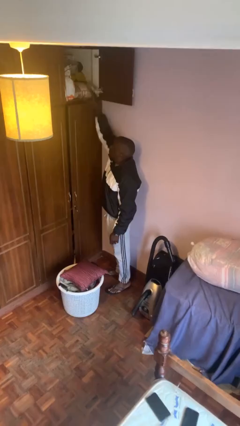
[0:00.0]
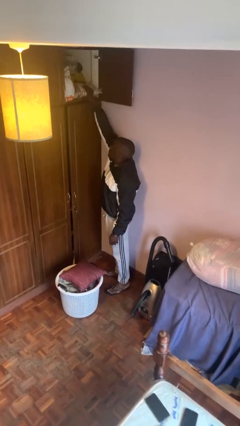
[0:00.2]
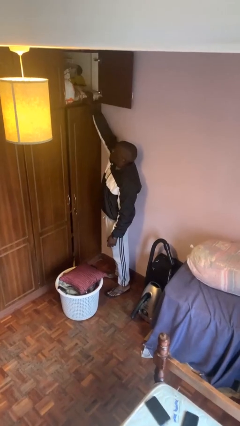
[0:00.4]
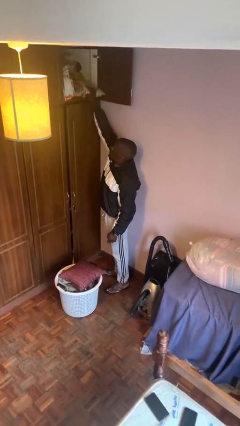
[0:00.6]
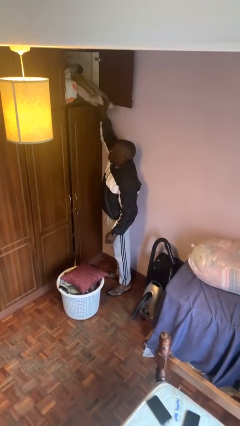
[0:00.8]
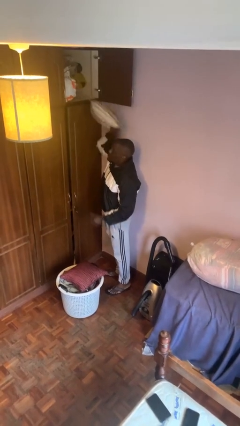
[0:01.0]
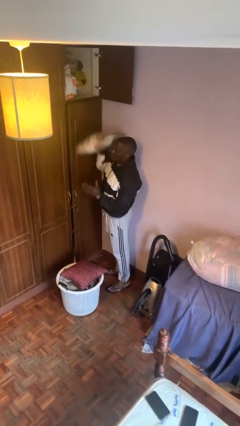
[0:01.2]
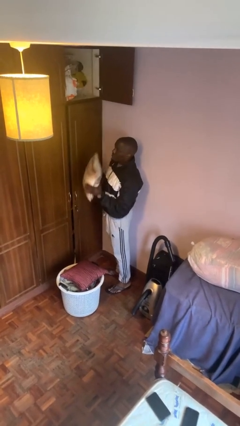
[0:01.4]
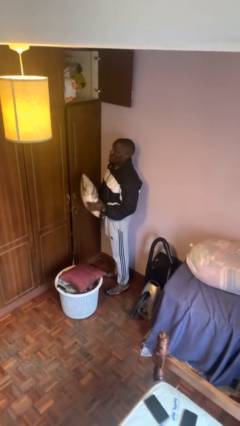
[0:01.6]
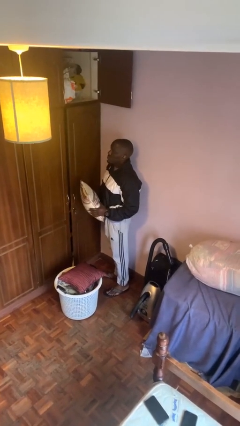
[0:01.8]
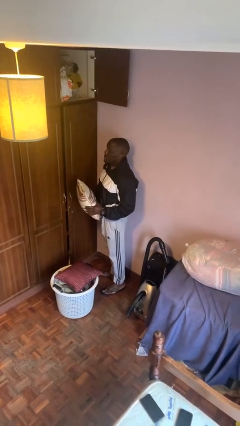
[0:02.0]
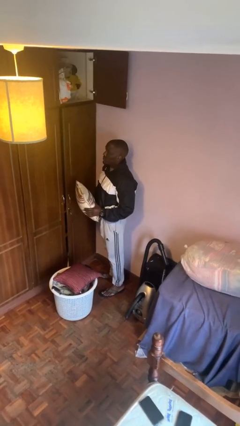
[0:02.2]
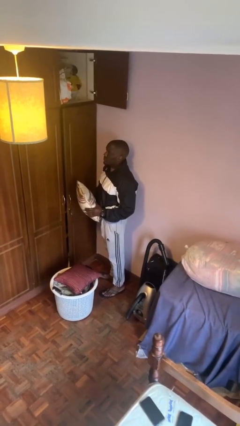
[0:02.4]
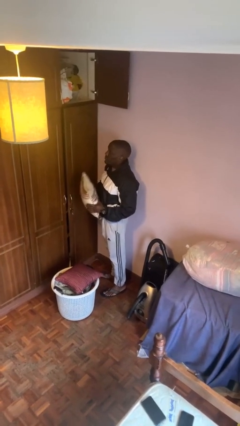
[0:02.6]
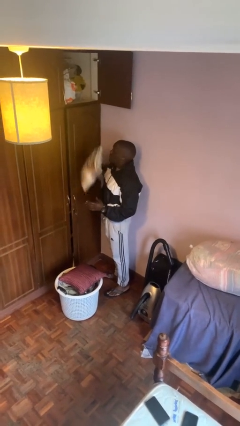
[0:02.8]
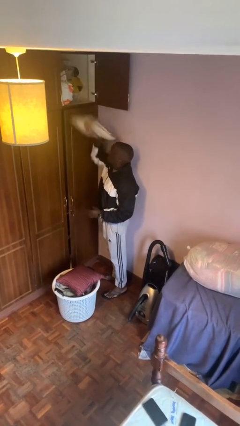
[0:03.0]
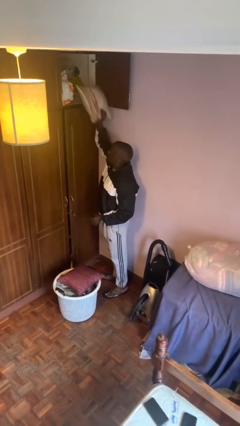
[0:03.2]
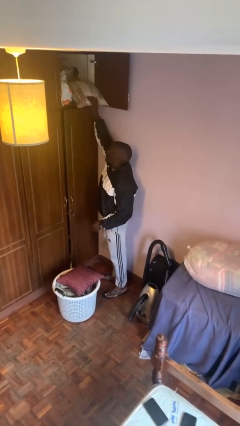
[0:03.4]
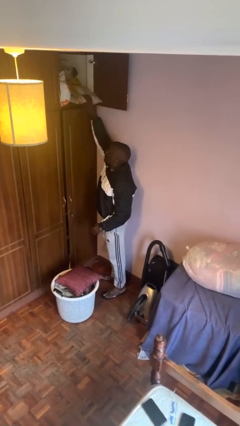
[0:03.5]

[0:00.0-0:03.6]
person picks up object from shelf

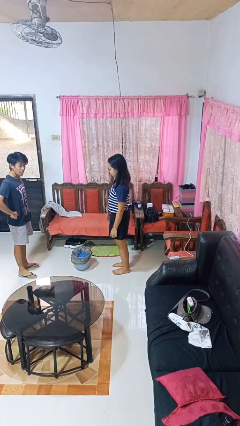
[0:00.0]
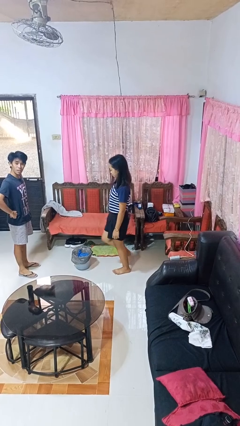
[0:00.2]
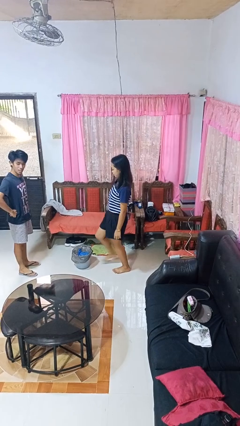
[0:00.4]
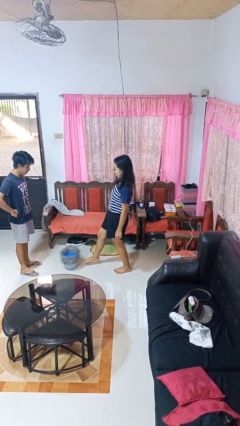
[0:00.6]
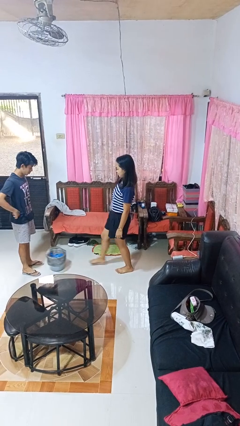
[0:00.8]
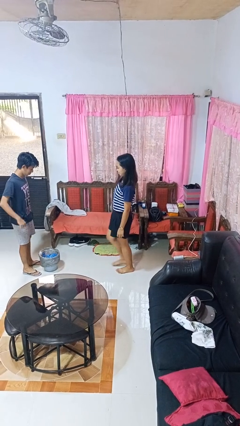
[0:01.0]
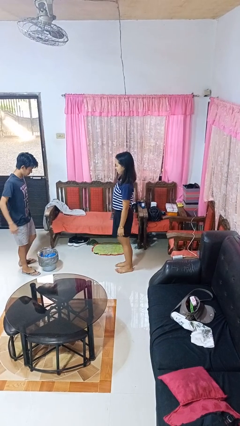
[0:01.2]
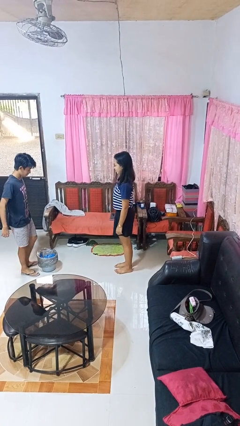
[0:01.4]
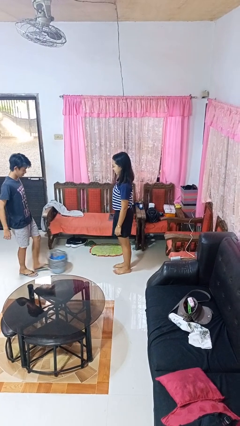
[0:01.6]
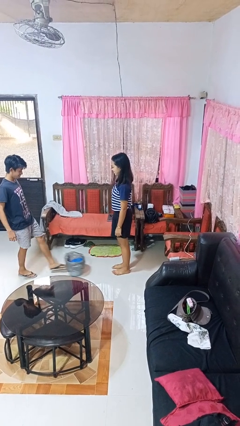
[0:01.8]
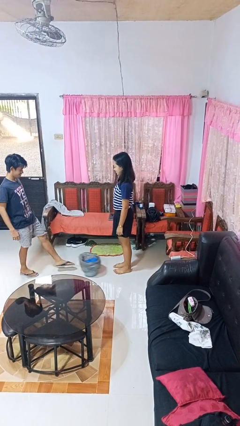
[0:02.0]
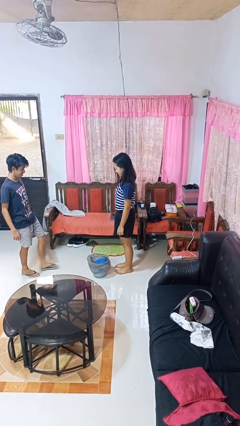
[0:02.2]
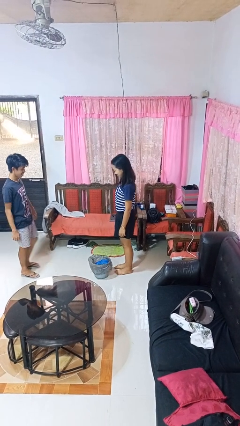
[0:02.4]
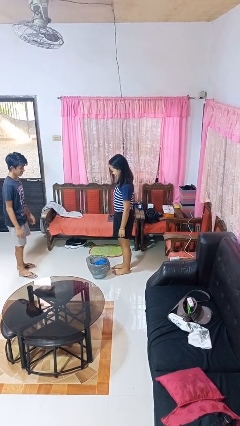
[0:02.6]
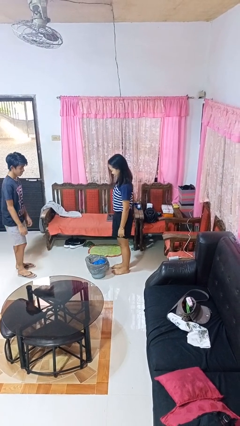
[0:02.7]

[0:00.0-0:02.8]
person kicks object to person

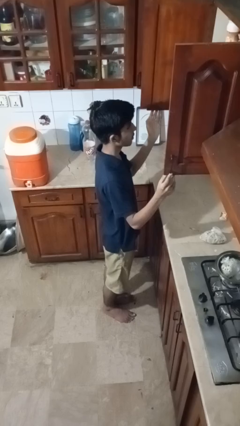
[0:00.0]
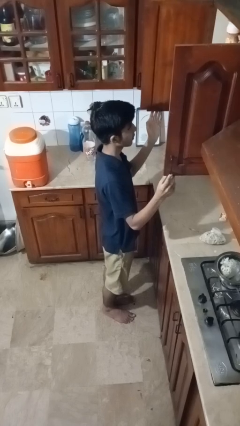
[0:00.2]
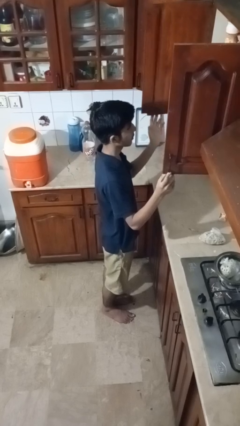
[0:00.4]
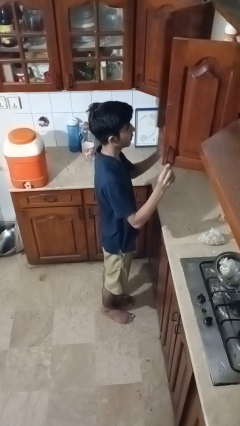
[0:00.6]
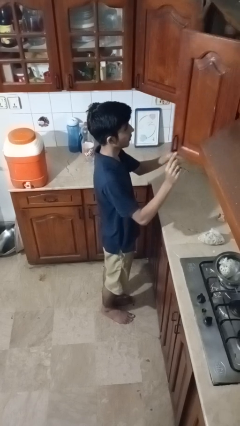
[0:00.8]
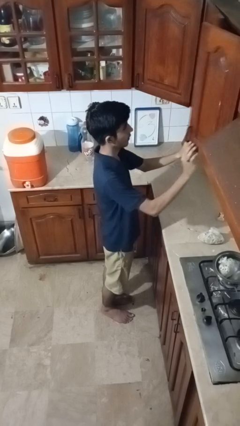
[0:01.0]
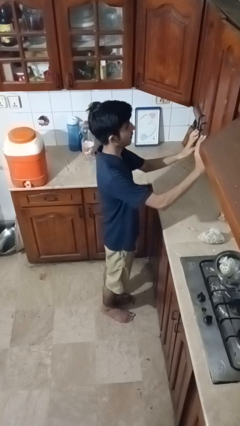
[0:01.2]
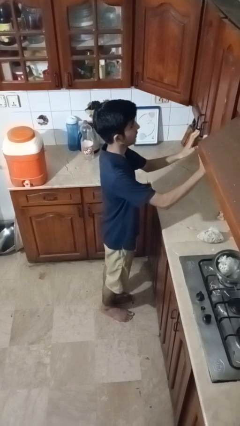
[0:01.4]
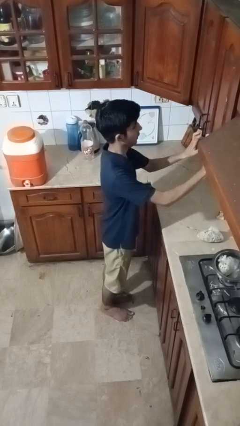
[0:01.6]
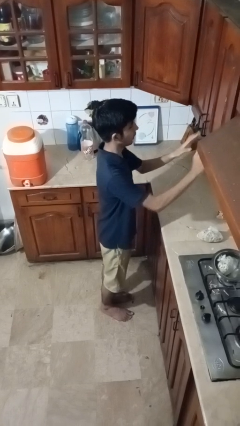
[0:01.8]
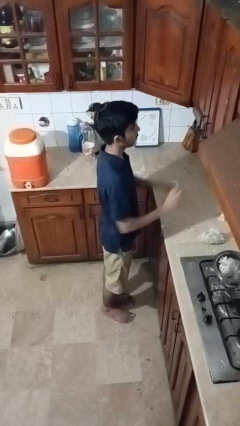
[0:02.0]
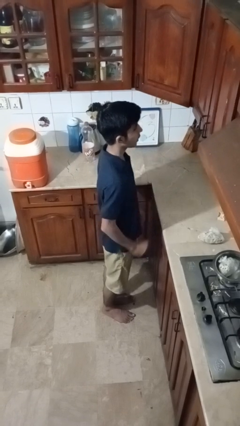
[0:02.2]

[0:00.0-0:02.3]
person closes cabinet

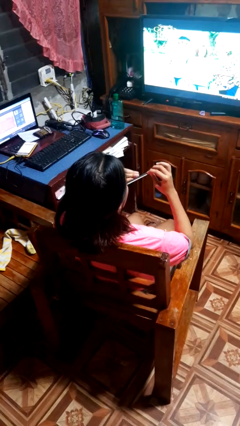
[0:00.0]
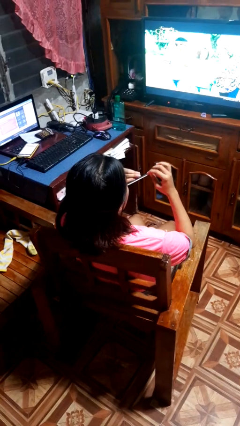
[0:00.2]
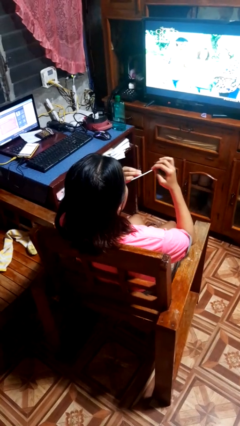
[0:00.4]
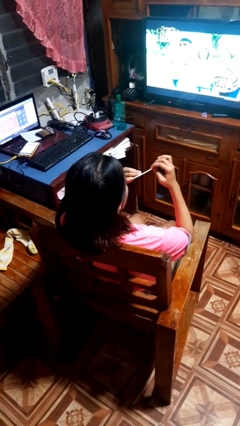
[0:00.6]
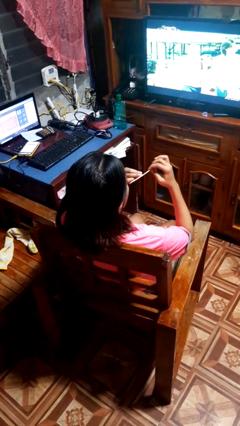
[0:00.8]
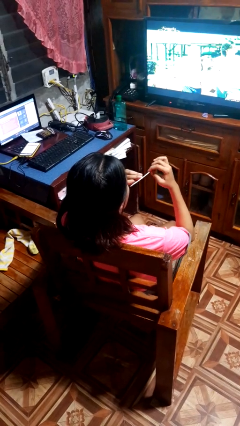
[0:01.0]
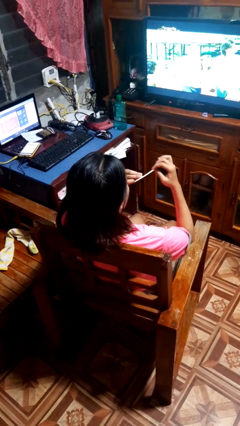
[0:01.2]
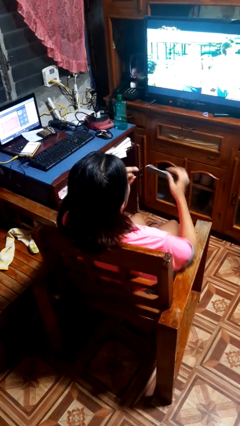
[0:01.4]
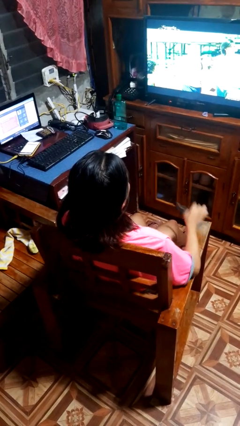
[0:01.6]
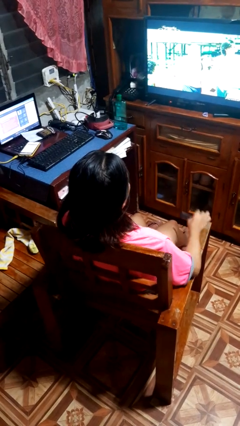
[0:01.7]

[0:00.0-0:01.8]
person files fingernails

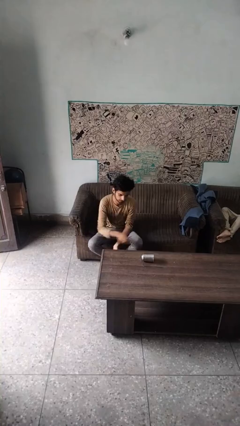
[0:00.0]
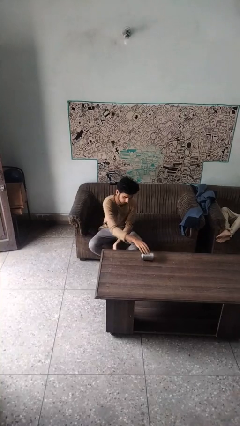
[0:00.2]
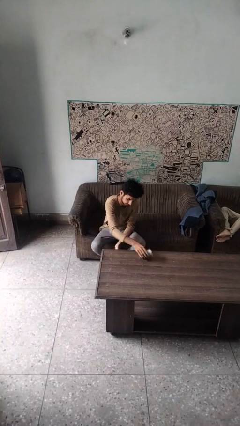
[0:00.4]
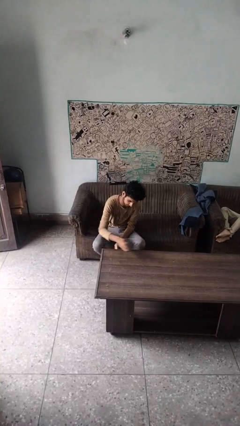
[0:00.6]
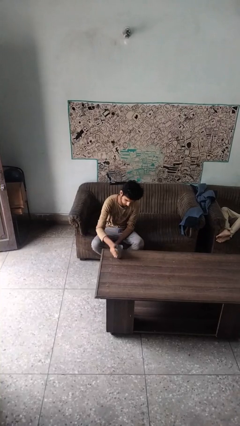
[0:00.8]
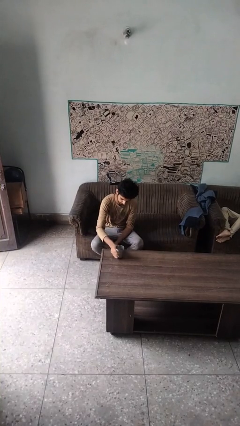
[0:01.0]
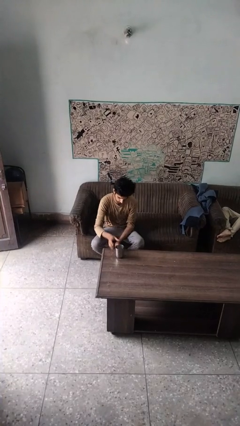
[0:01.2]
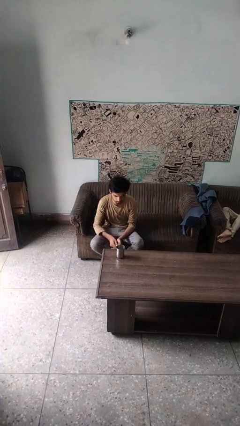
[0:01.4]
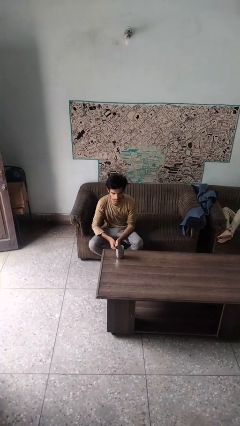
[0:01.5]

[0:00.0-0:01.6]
person sets upright glass

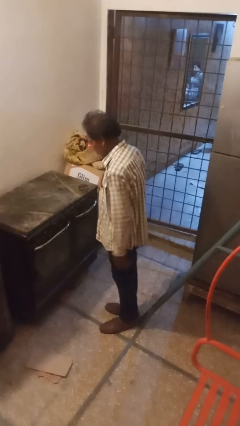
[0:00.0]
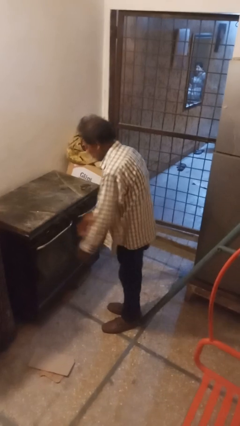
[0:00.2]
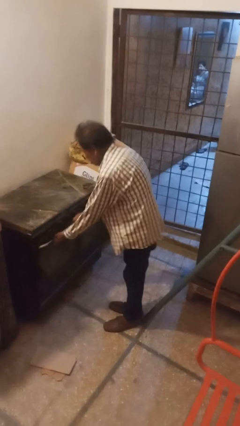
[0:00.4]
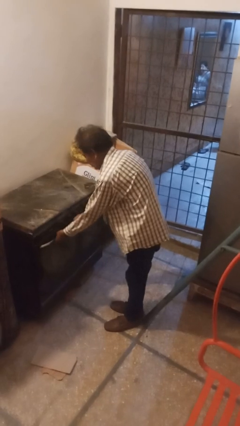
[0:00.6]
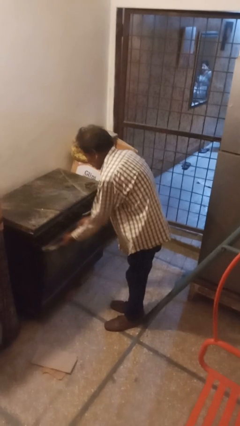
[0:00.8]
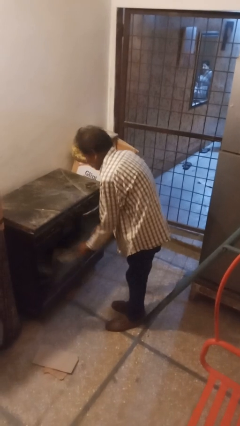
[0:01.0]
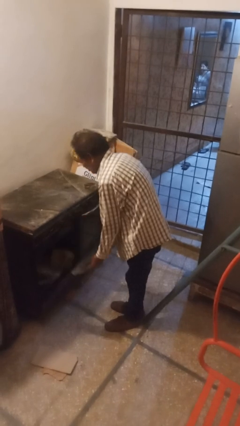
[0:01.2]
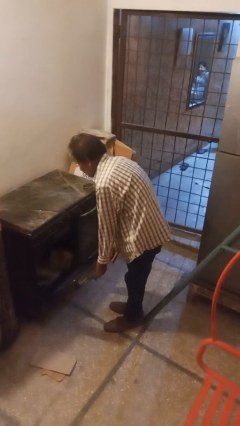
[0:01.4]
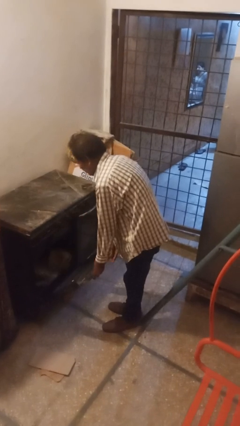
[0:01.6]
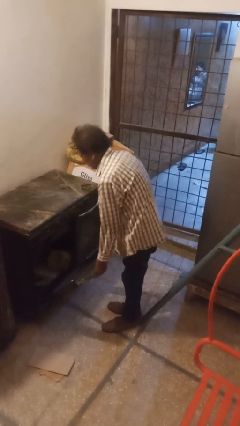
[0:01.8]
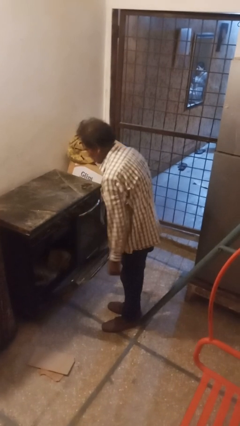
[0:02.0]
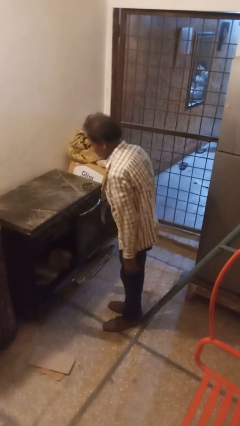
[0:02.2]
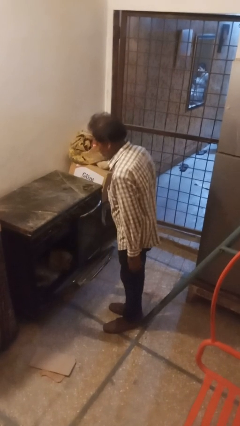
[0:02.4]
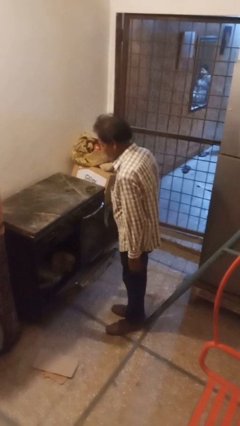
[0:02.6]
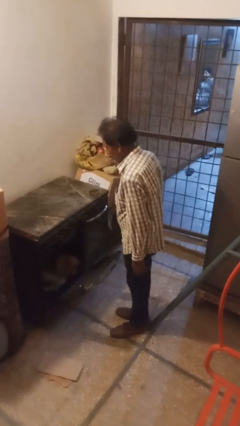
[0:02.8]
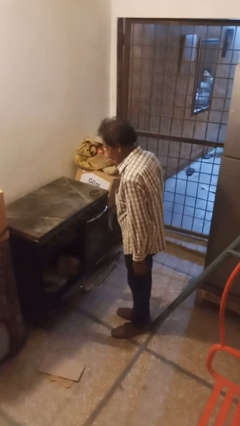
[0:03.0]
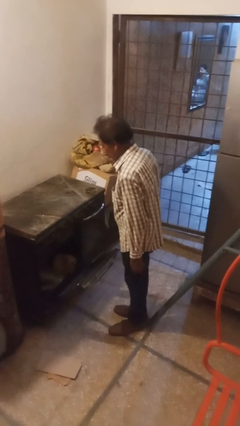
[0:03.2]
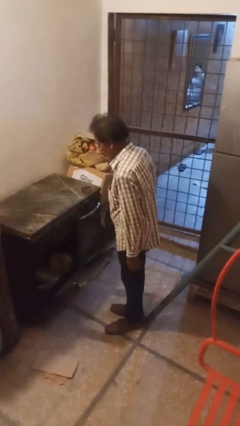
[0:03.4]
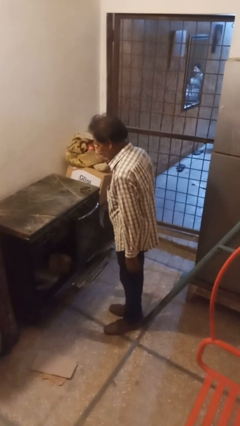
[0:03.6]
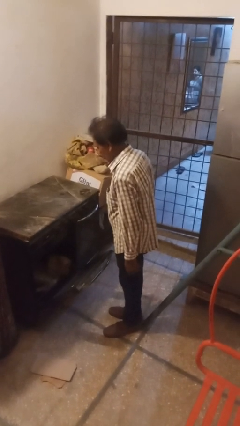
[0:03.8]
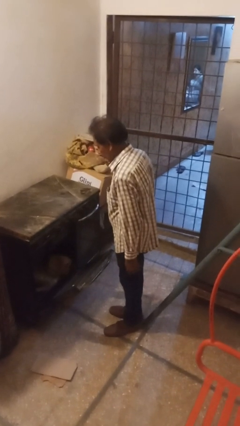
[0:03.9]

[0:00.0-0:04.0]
person opens oven door

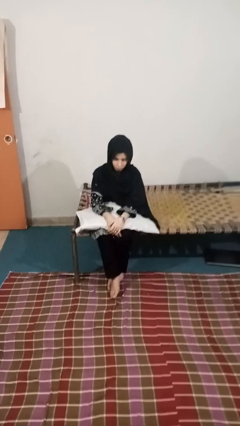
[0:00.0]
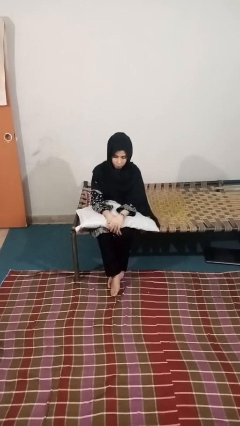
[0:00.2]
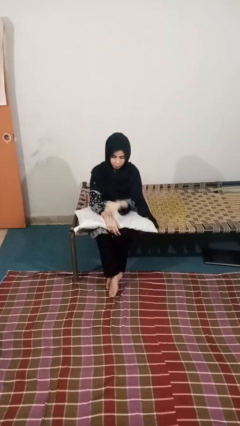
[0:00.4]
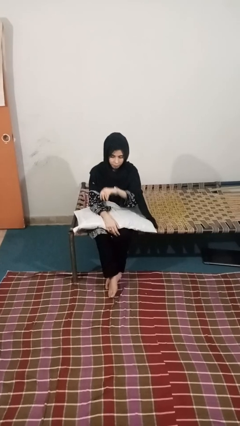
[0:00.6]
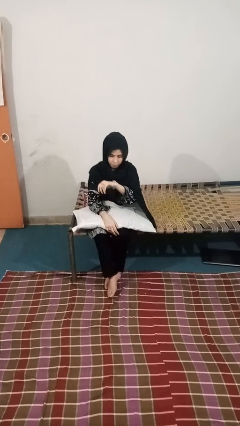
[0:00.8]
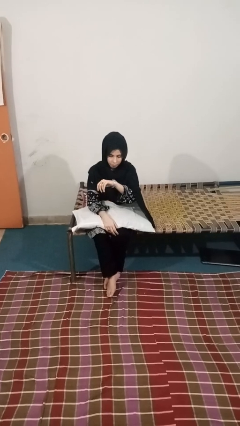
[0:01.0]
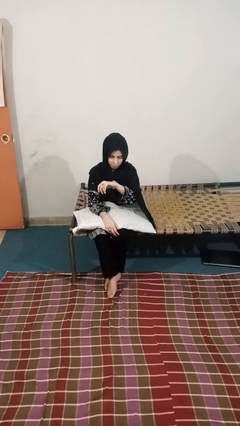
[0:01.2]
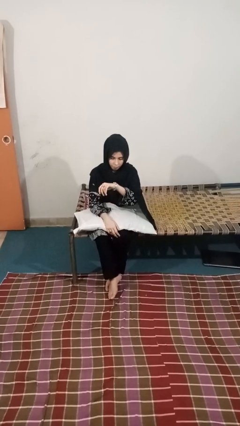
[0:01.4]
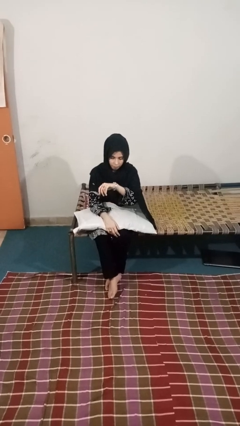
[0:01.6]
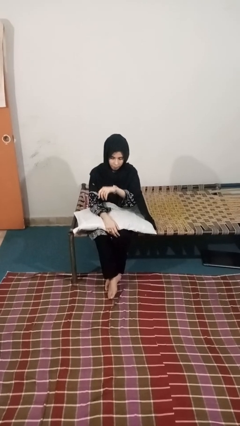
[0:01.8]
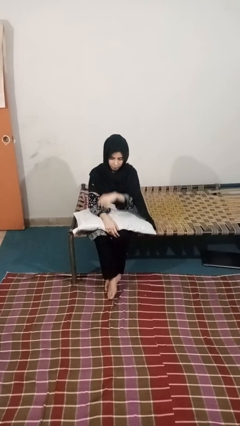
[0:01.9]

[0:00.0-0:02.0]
person looks at wristwatch
